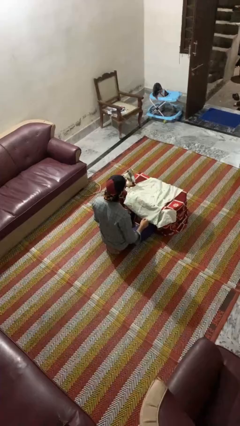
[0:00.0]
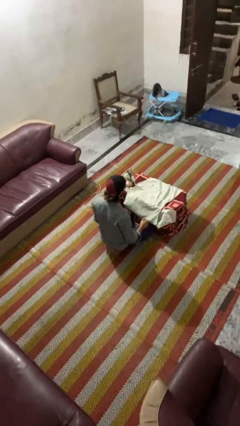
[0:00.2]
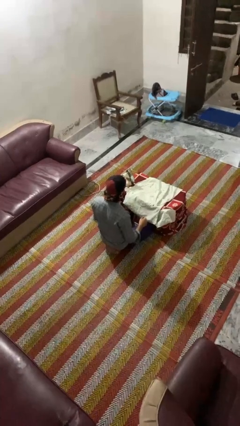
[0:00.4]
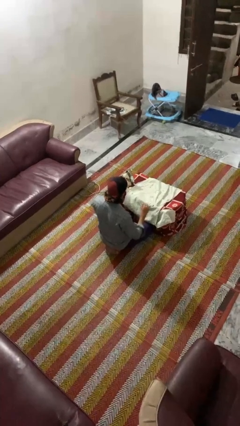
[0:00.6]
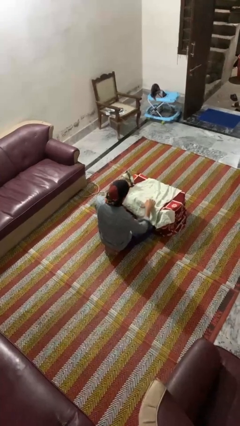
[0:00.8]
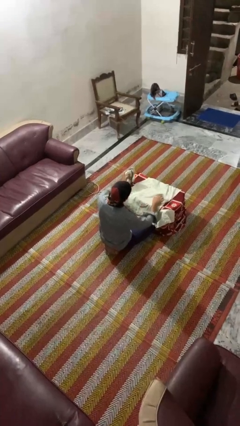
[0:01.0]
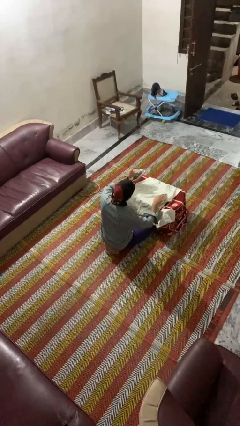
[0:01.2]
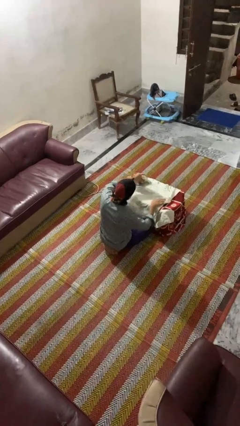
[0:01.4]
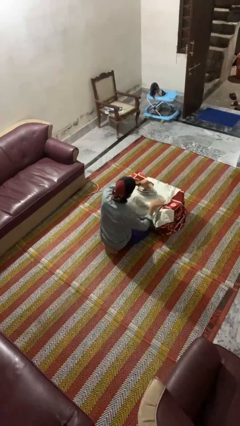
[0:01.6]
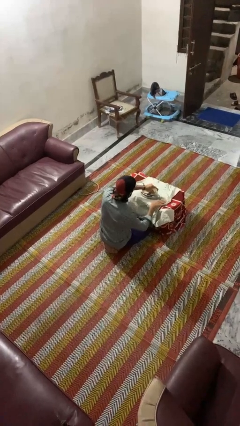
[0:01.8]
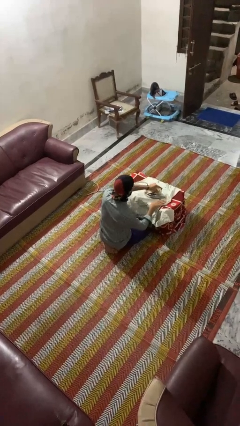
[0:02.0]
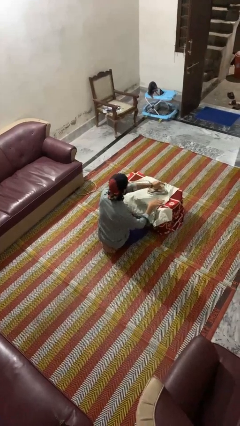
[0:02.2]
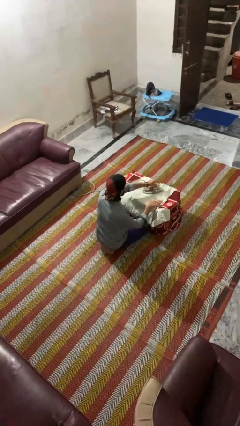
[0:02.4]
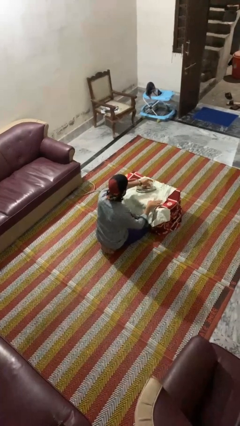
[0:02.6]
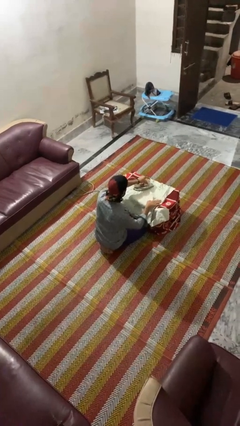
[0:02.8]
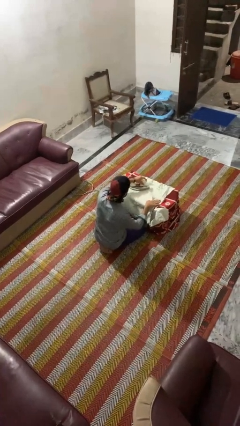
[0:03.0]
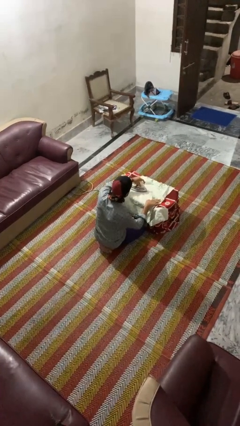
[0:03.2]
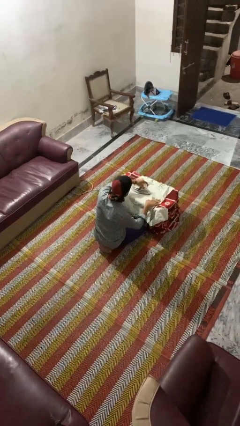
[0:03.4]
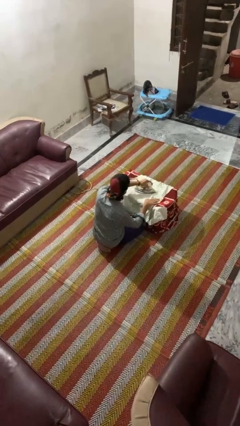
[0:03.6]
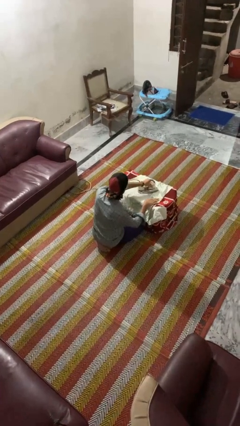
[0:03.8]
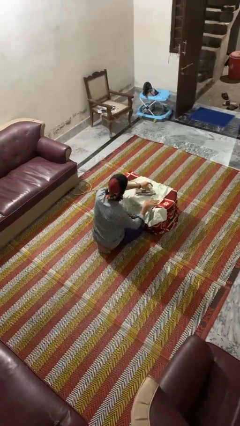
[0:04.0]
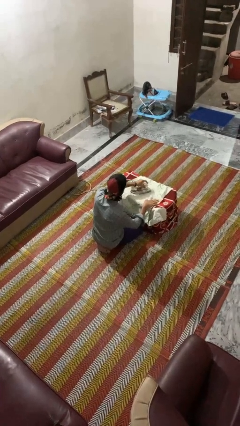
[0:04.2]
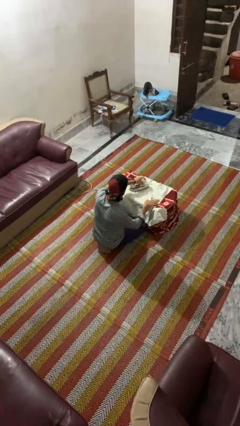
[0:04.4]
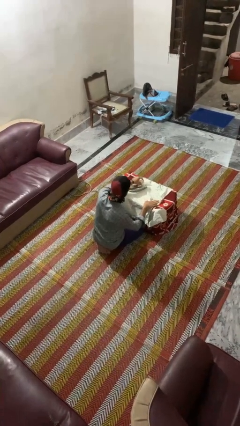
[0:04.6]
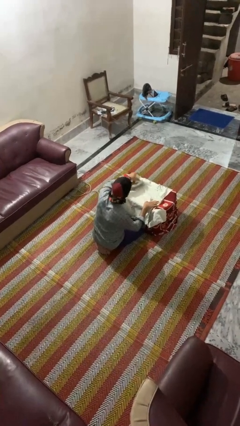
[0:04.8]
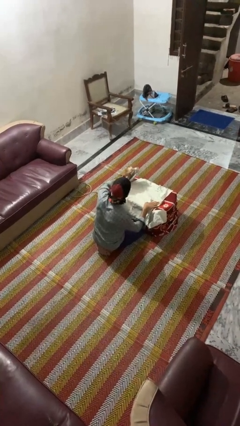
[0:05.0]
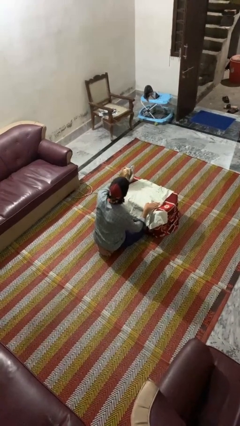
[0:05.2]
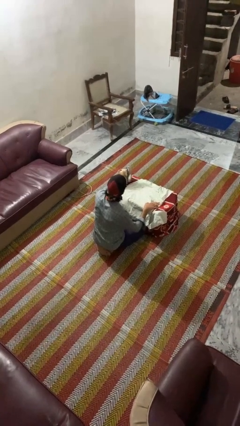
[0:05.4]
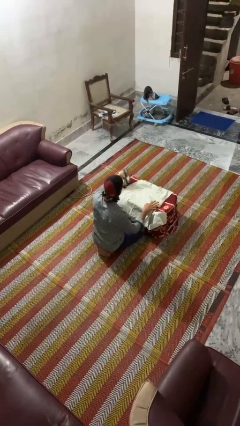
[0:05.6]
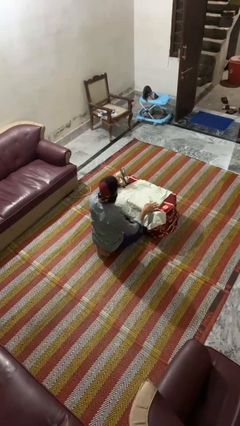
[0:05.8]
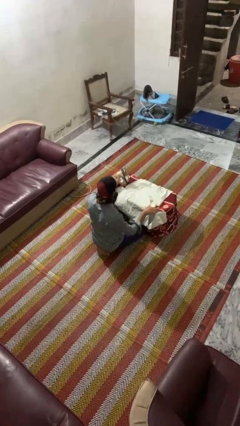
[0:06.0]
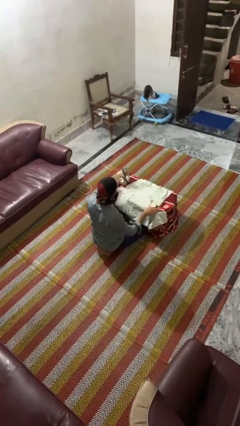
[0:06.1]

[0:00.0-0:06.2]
person irons clothes

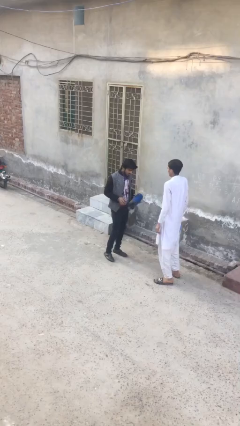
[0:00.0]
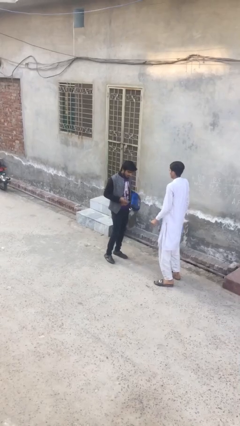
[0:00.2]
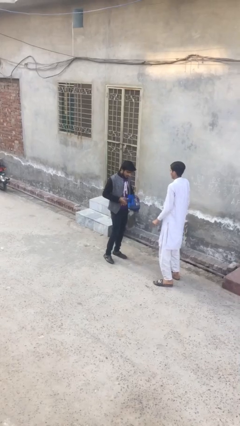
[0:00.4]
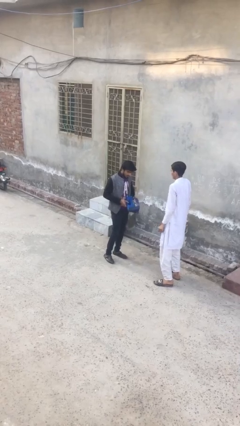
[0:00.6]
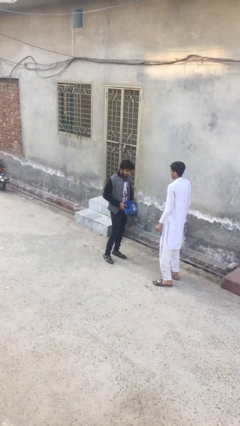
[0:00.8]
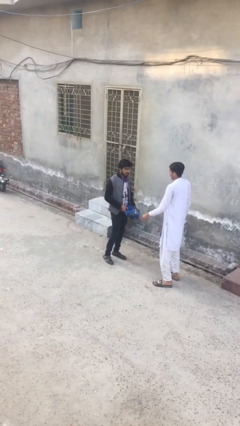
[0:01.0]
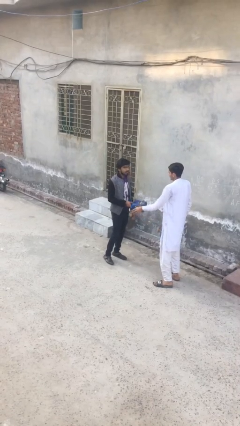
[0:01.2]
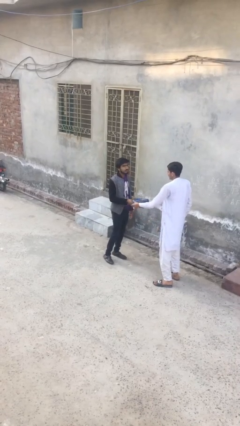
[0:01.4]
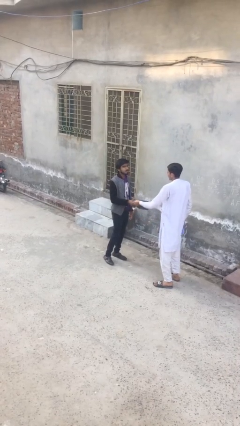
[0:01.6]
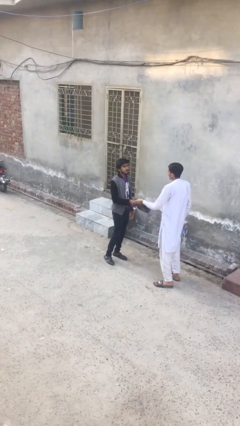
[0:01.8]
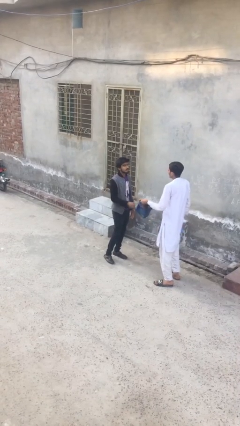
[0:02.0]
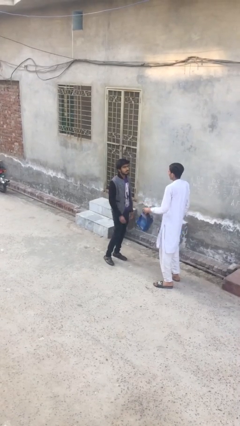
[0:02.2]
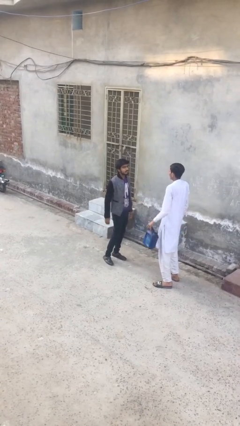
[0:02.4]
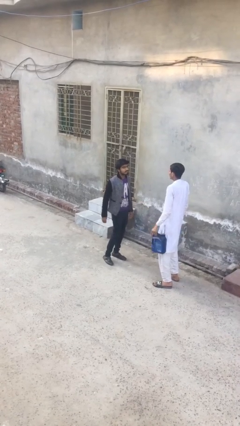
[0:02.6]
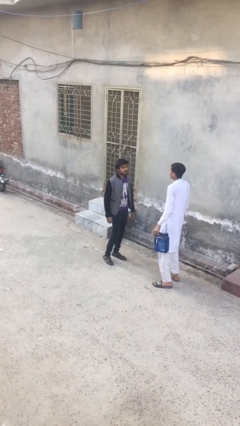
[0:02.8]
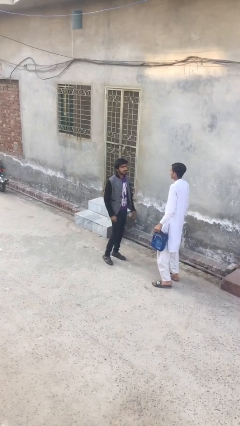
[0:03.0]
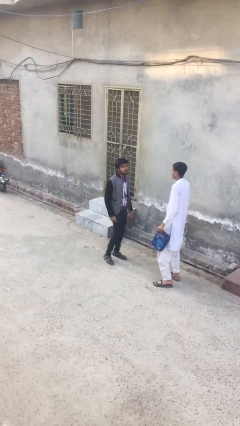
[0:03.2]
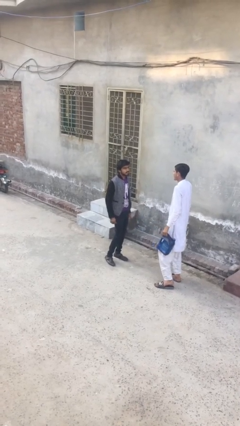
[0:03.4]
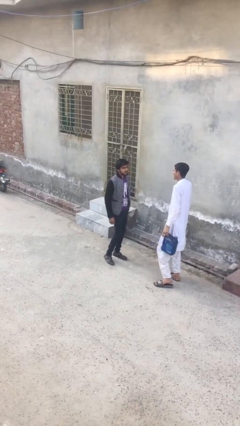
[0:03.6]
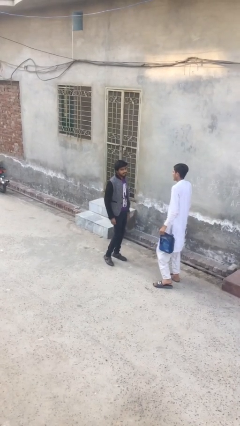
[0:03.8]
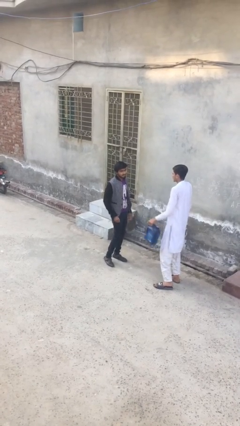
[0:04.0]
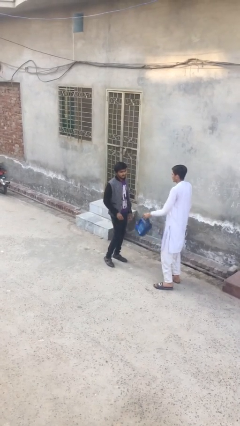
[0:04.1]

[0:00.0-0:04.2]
person transfers object to person

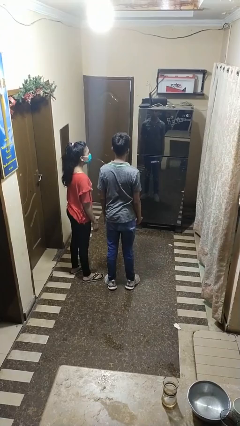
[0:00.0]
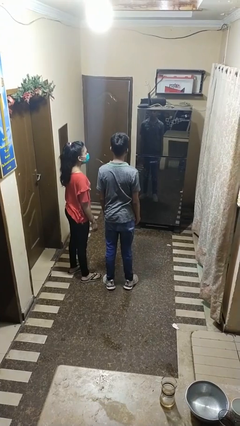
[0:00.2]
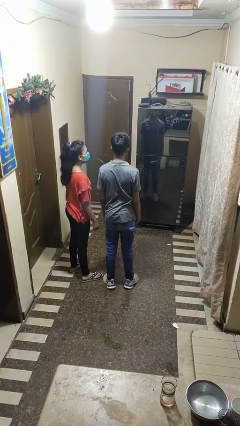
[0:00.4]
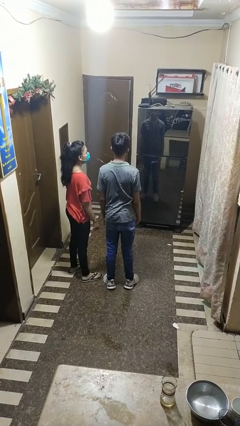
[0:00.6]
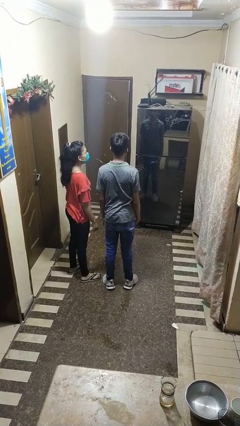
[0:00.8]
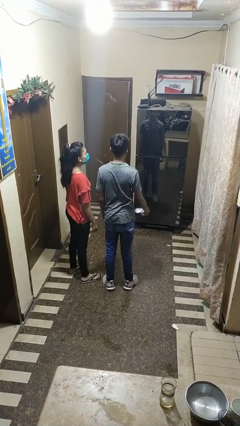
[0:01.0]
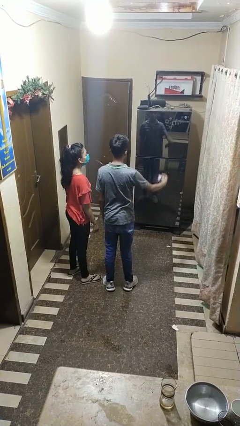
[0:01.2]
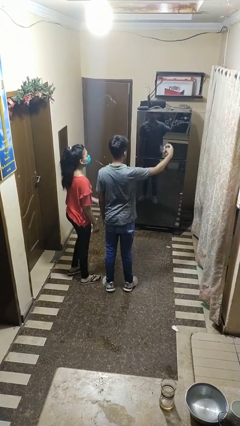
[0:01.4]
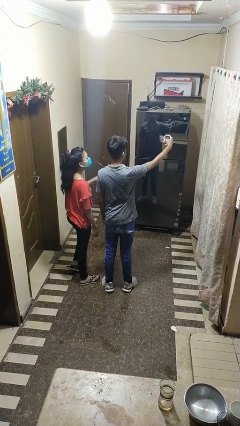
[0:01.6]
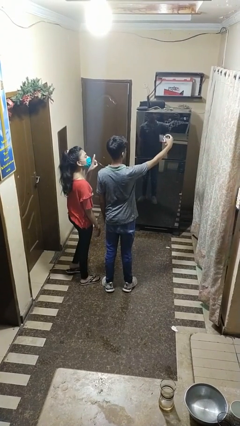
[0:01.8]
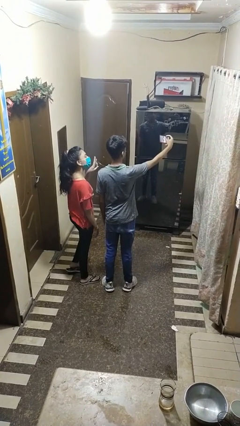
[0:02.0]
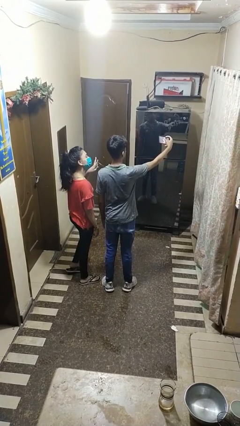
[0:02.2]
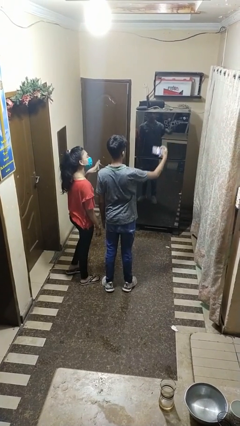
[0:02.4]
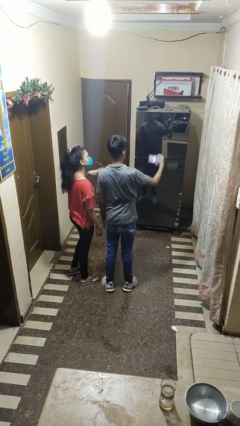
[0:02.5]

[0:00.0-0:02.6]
person takes selfie with person

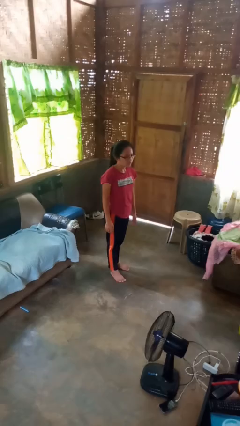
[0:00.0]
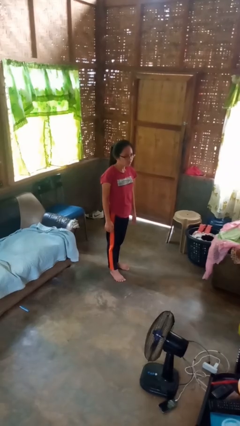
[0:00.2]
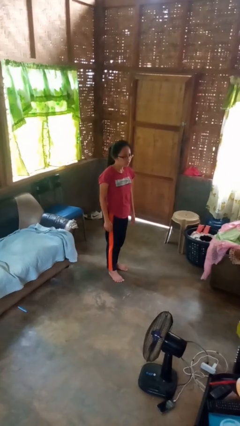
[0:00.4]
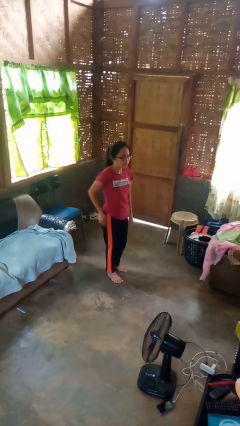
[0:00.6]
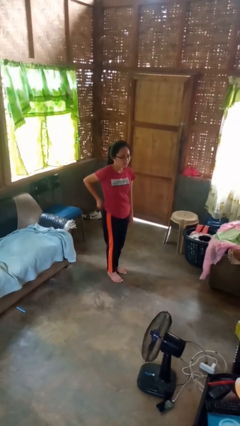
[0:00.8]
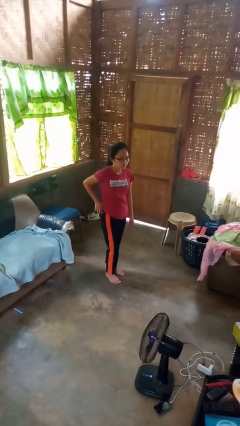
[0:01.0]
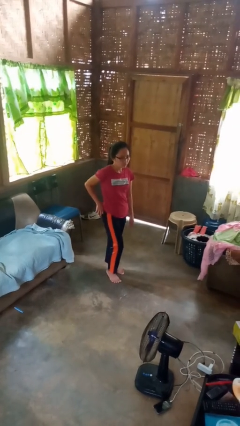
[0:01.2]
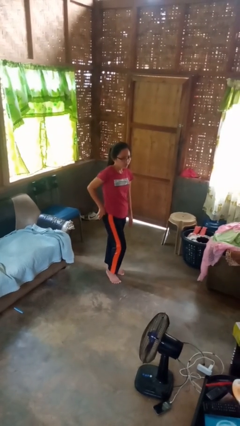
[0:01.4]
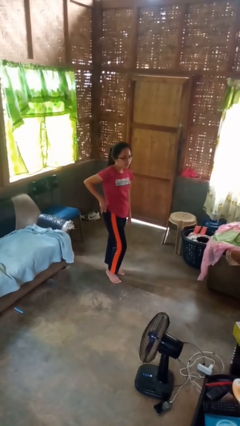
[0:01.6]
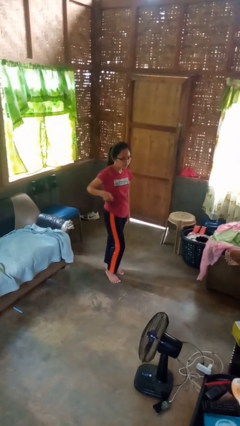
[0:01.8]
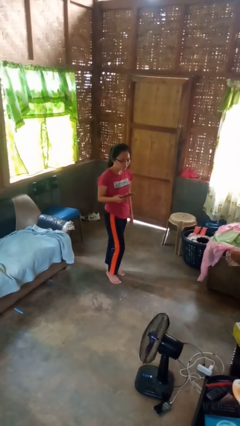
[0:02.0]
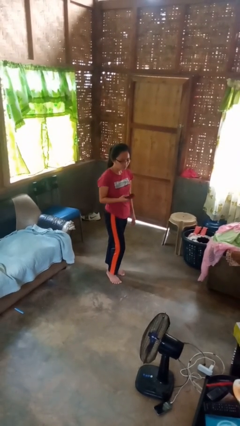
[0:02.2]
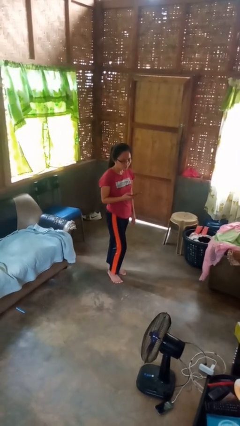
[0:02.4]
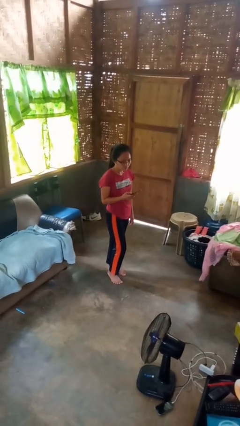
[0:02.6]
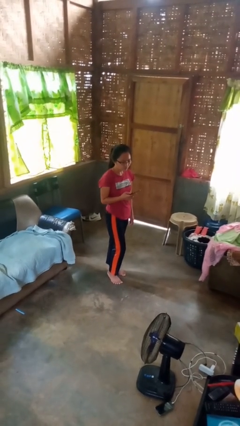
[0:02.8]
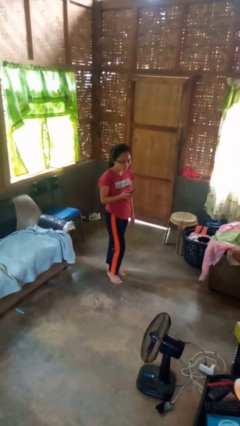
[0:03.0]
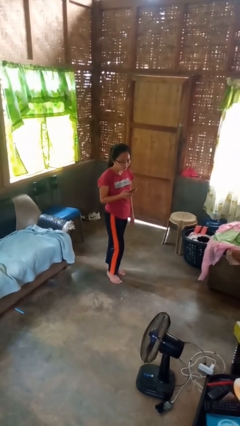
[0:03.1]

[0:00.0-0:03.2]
person takes phone from pocket

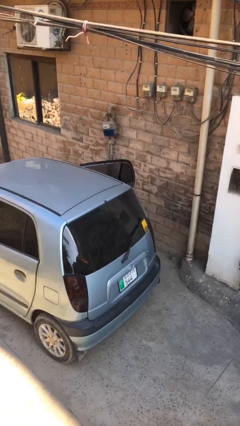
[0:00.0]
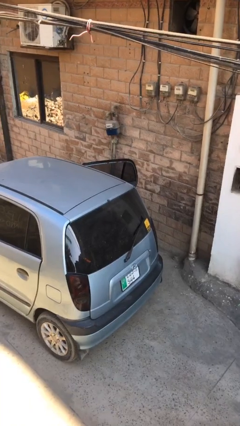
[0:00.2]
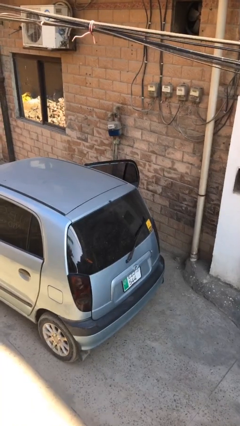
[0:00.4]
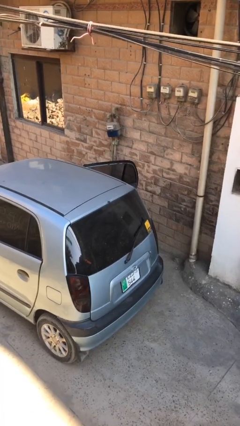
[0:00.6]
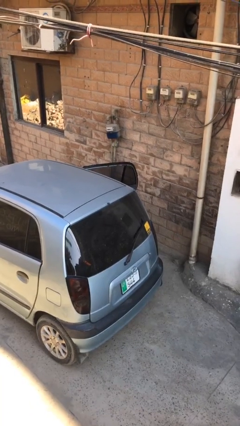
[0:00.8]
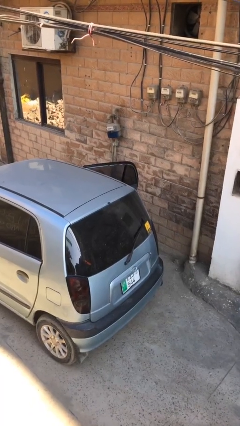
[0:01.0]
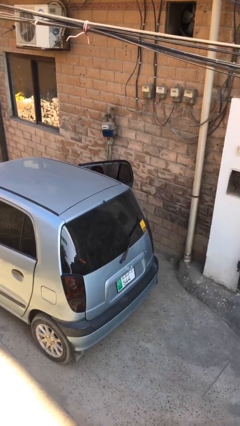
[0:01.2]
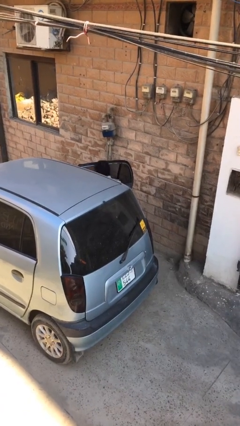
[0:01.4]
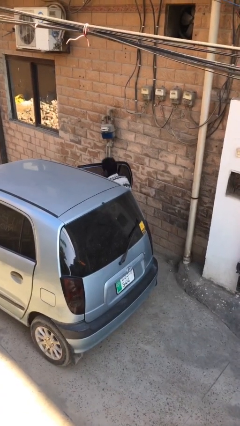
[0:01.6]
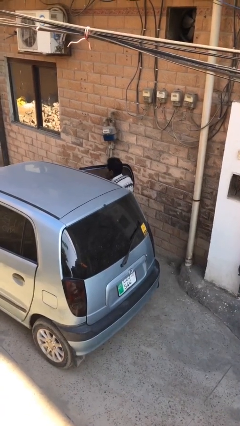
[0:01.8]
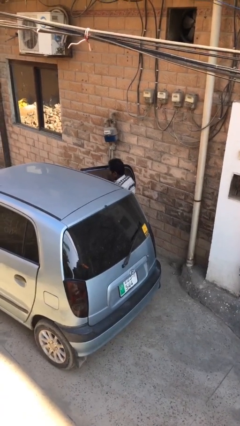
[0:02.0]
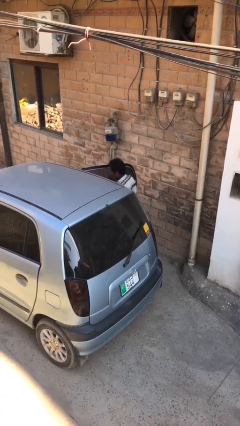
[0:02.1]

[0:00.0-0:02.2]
person exits car
